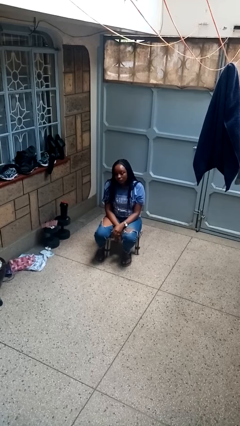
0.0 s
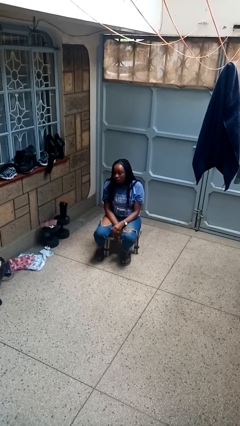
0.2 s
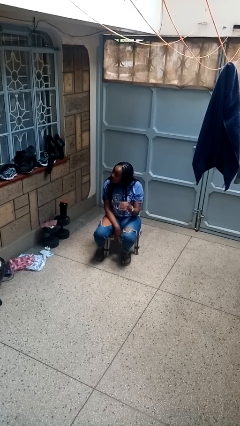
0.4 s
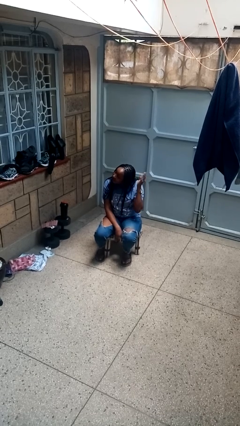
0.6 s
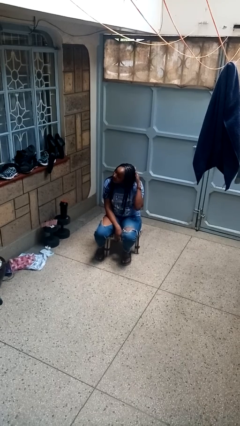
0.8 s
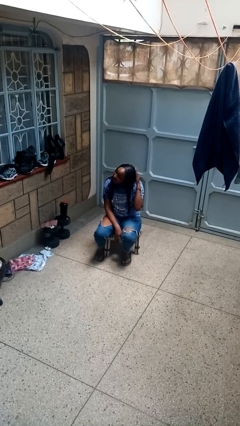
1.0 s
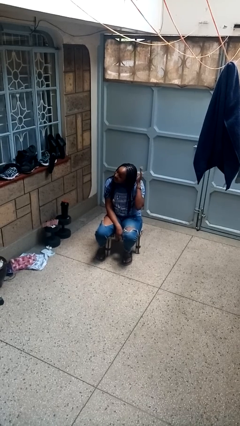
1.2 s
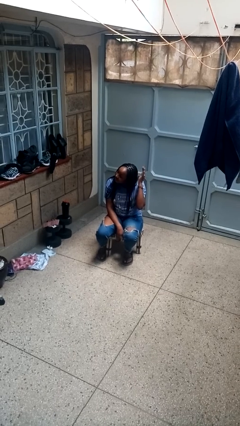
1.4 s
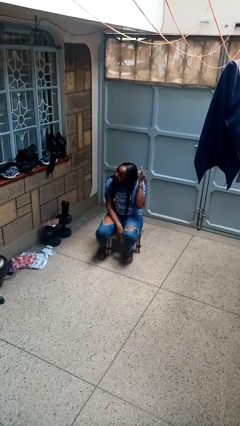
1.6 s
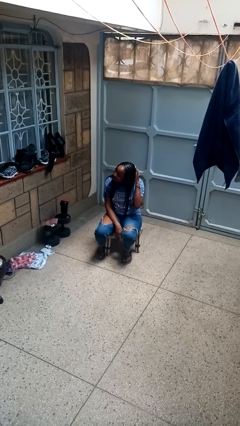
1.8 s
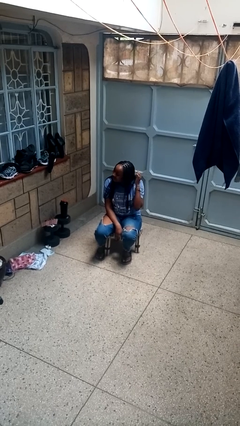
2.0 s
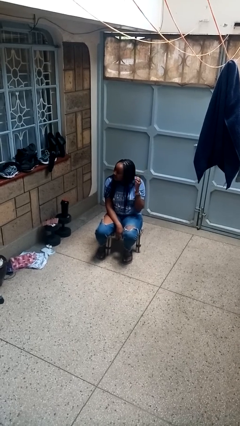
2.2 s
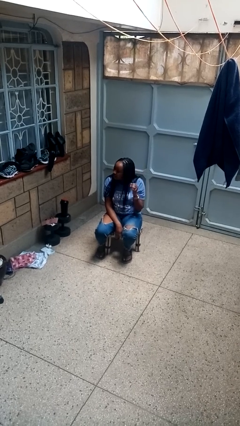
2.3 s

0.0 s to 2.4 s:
person pats head

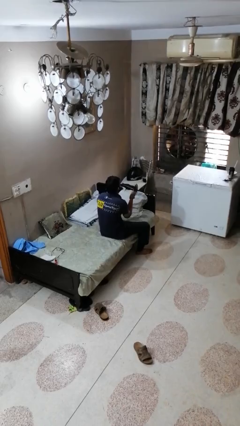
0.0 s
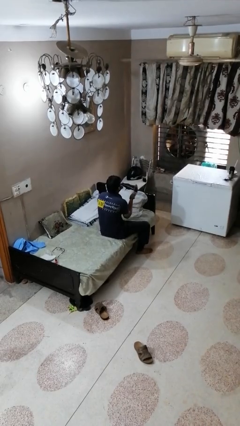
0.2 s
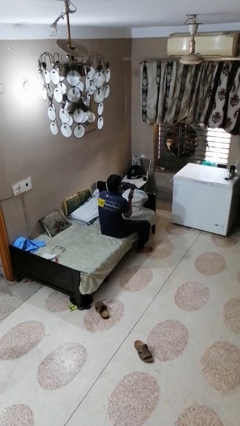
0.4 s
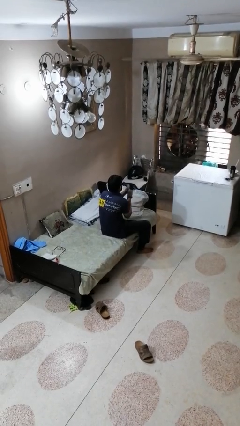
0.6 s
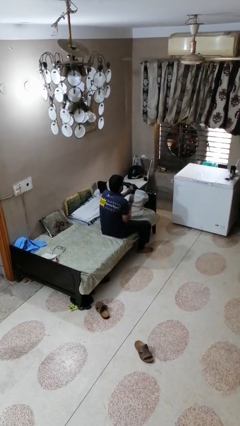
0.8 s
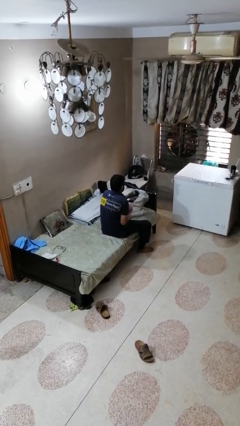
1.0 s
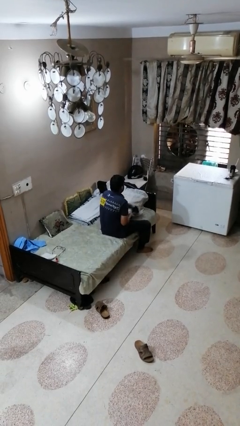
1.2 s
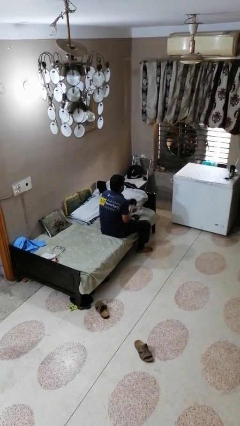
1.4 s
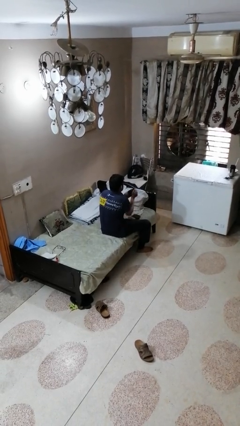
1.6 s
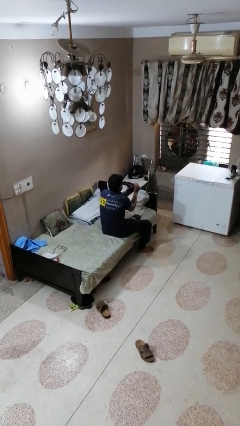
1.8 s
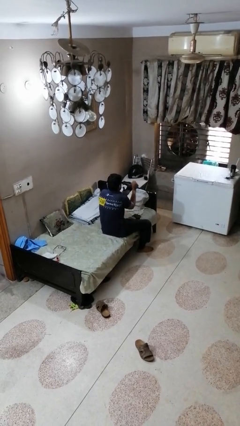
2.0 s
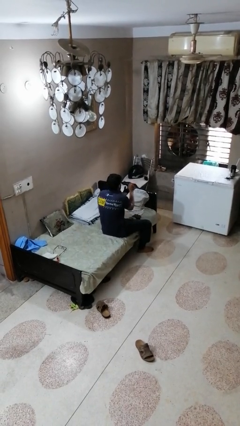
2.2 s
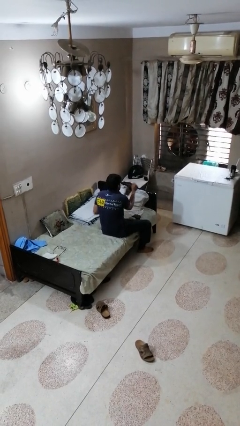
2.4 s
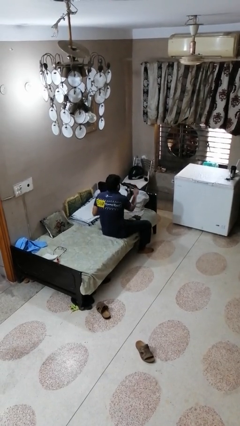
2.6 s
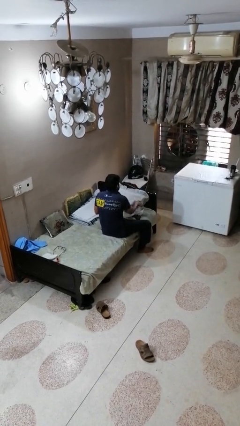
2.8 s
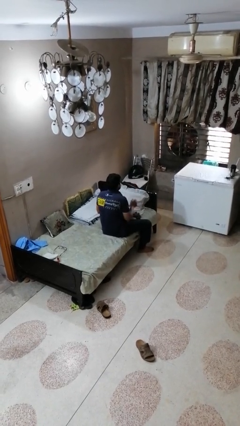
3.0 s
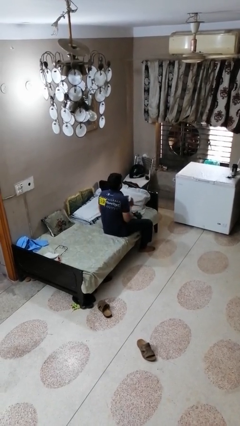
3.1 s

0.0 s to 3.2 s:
person takes off gloves

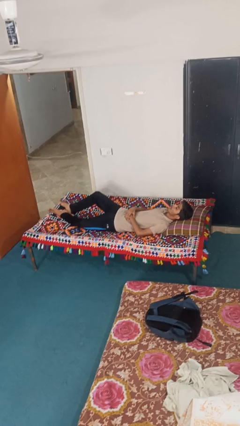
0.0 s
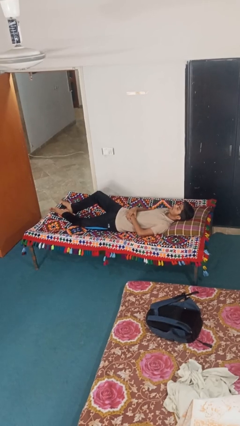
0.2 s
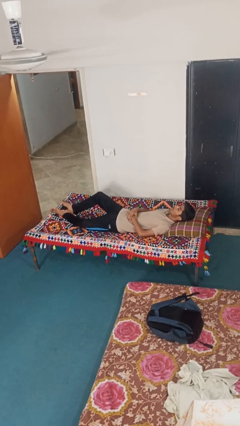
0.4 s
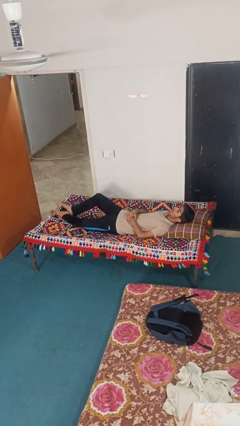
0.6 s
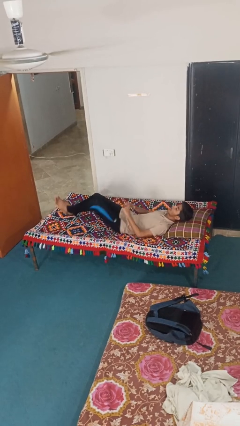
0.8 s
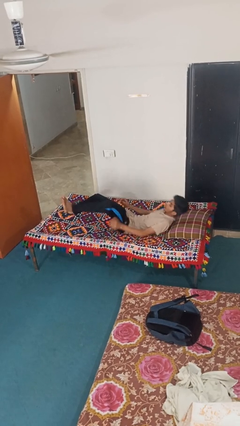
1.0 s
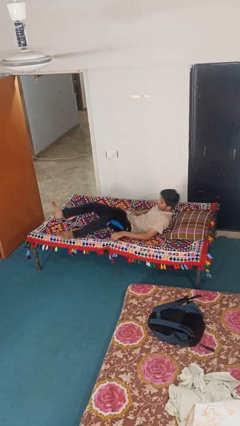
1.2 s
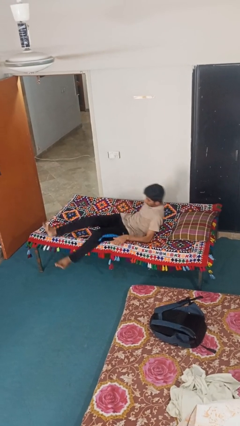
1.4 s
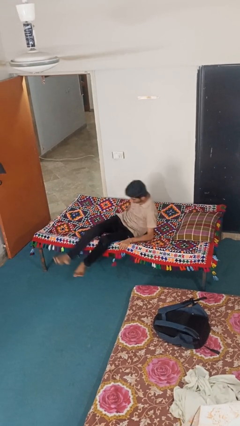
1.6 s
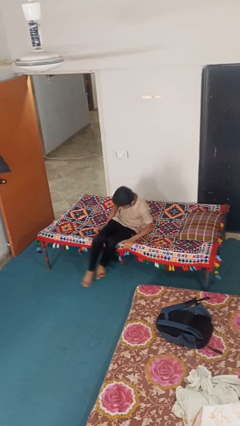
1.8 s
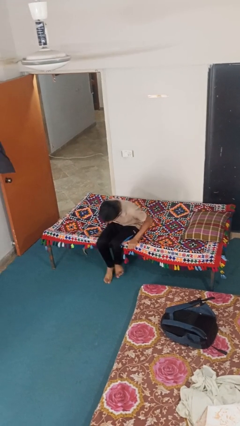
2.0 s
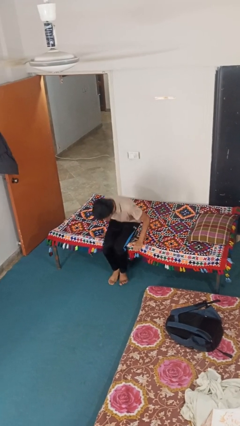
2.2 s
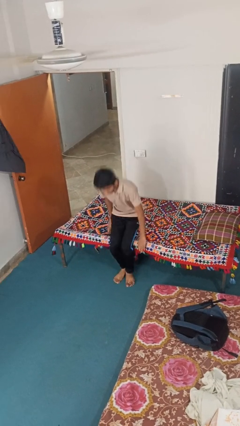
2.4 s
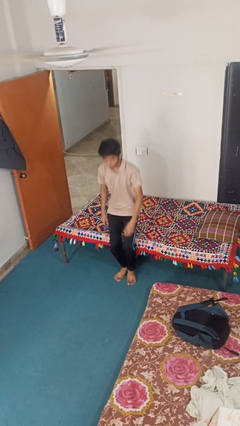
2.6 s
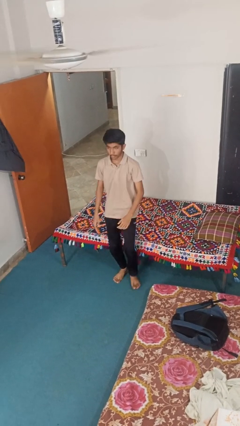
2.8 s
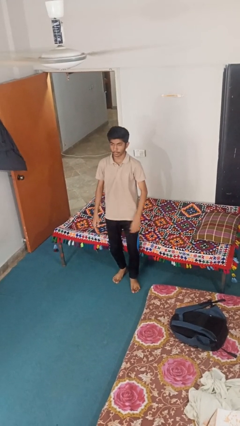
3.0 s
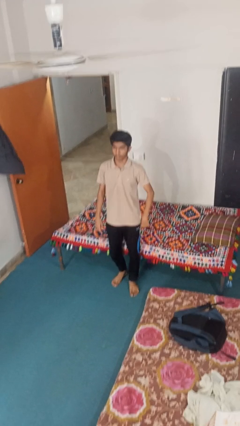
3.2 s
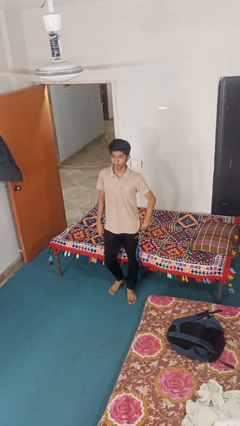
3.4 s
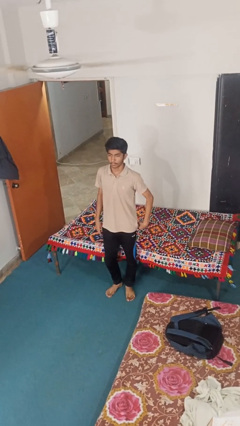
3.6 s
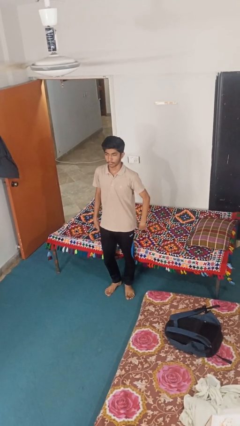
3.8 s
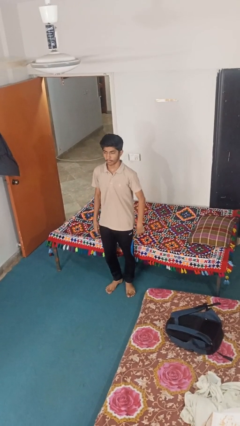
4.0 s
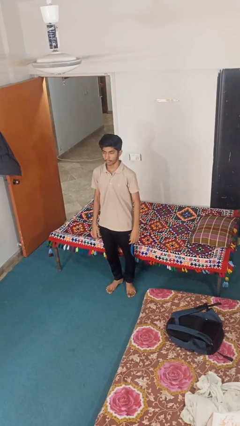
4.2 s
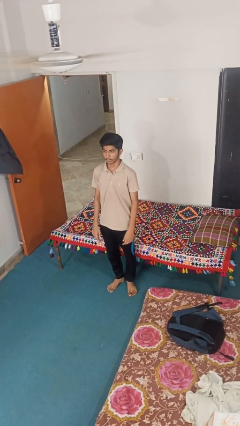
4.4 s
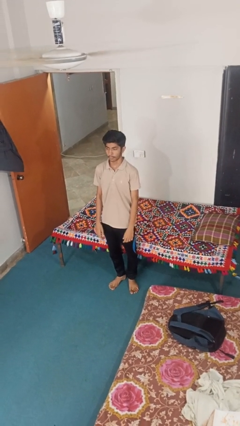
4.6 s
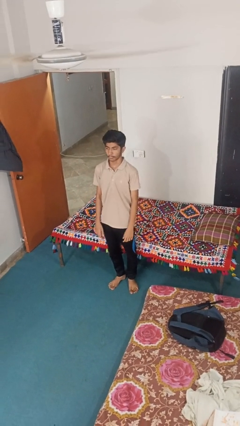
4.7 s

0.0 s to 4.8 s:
person stands up

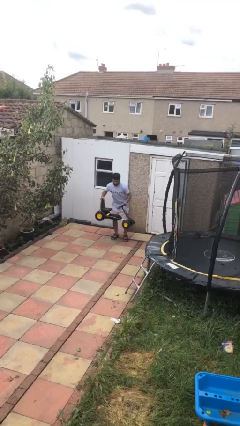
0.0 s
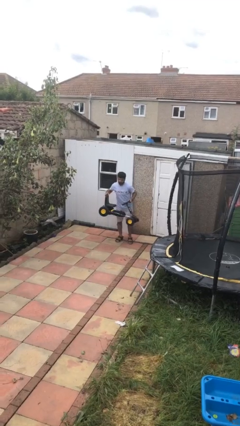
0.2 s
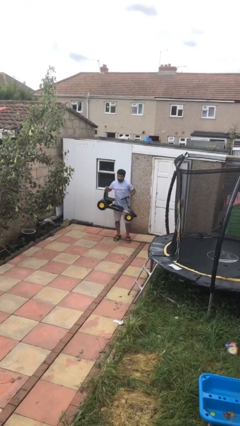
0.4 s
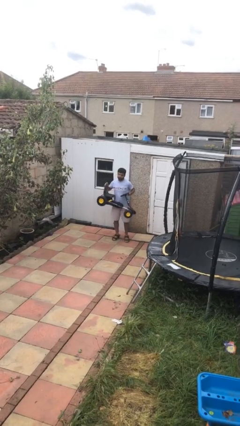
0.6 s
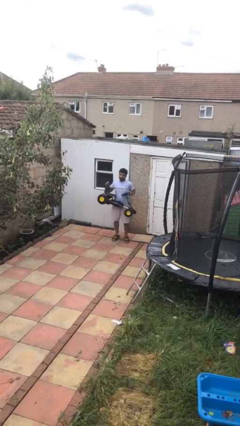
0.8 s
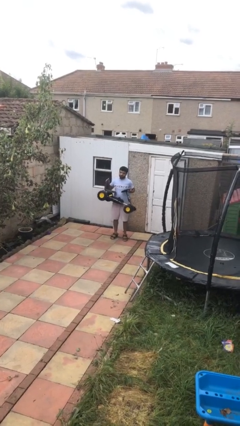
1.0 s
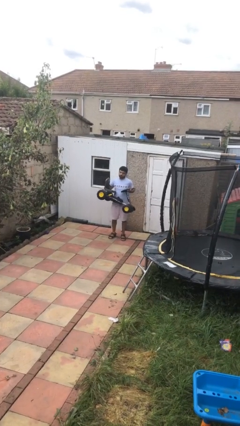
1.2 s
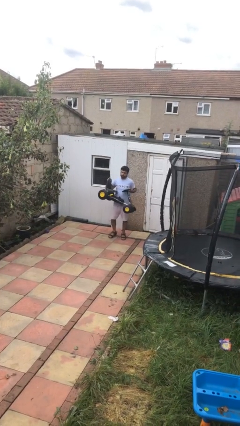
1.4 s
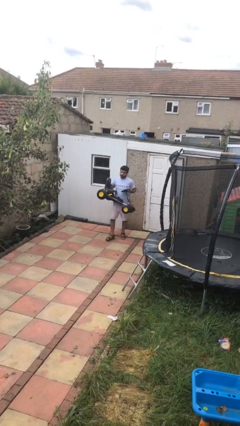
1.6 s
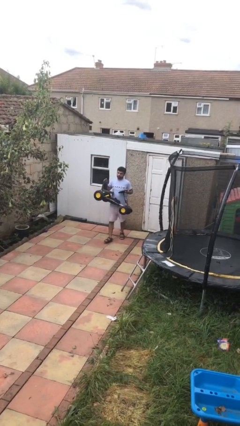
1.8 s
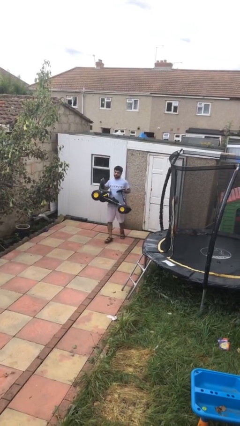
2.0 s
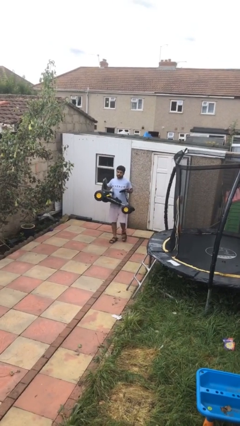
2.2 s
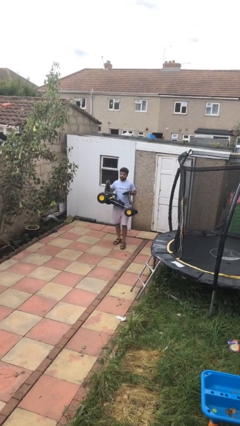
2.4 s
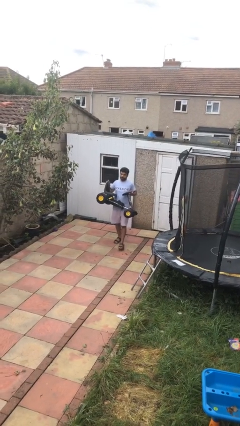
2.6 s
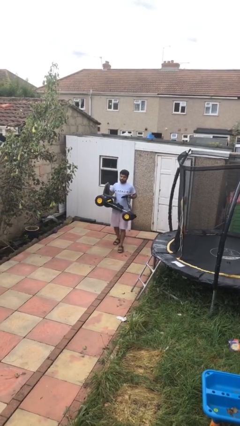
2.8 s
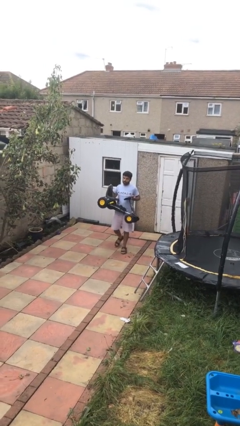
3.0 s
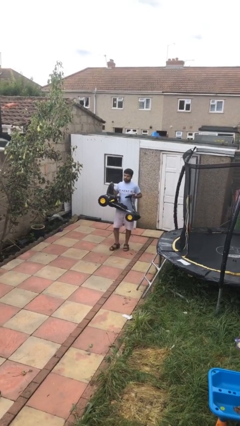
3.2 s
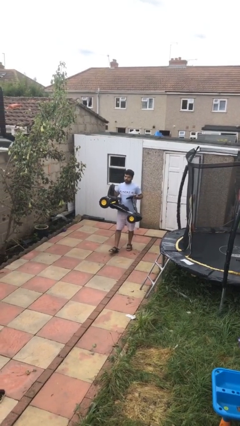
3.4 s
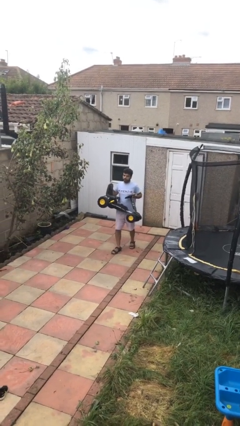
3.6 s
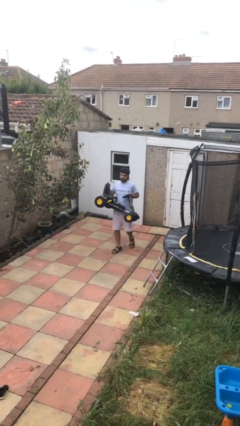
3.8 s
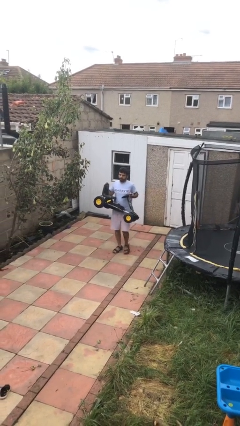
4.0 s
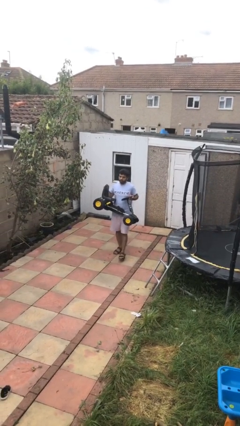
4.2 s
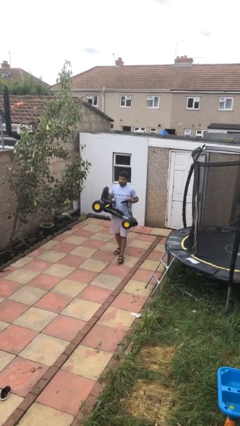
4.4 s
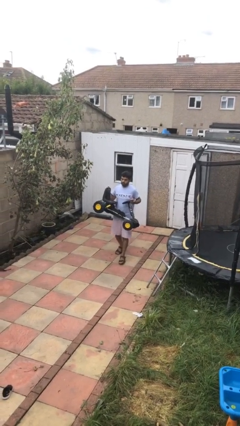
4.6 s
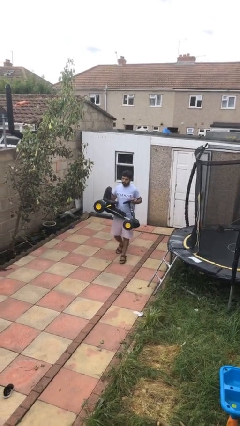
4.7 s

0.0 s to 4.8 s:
person carries heavy object

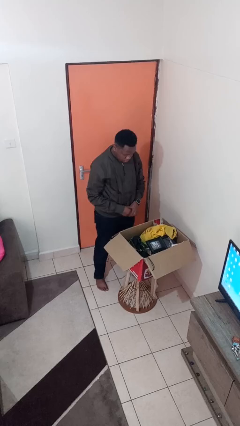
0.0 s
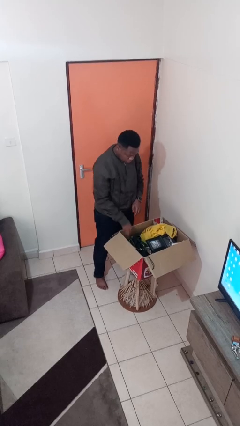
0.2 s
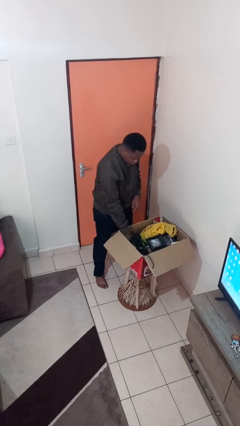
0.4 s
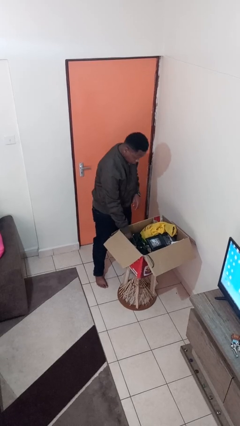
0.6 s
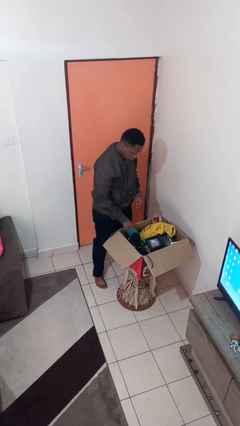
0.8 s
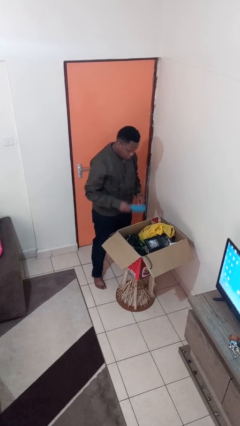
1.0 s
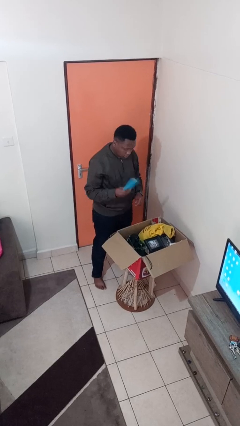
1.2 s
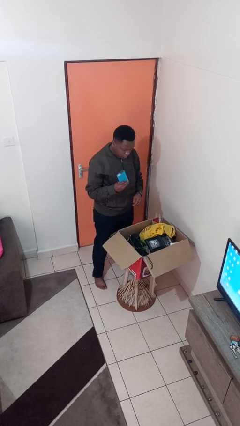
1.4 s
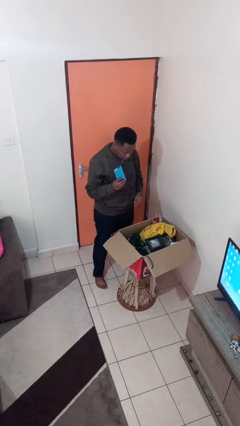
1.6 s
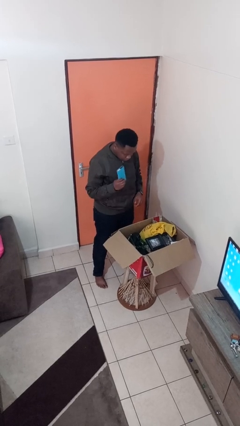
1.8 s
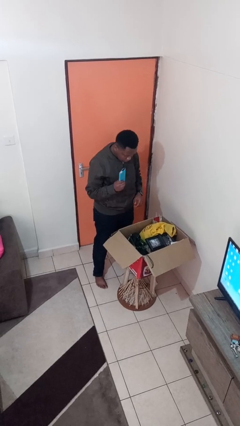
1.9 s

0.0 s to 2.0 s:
person takes object from box

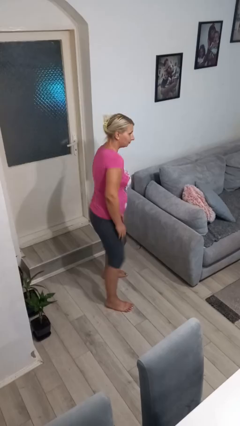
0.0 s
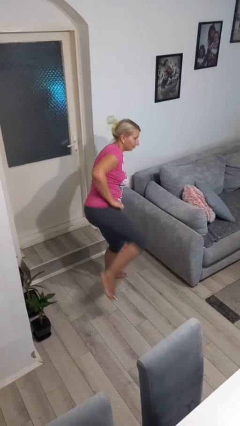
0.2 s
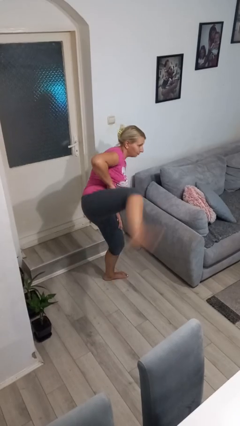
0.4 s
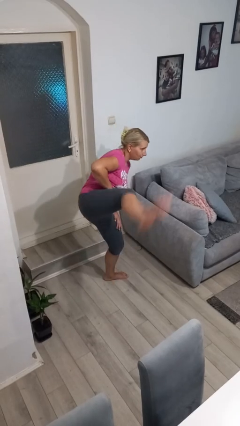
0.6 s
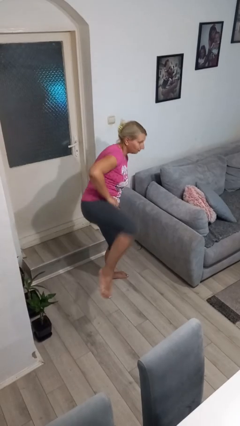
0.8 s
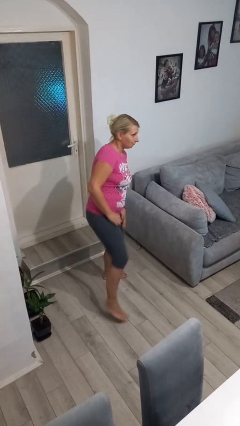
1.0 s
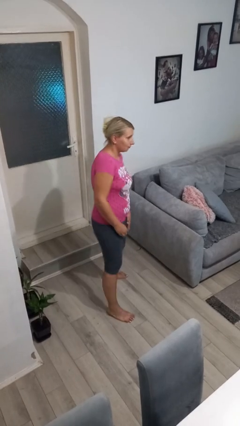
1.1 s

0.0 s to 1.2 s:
person karate kicks
